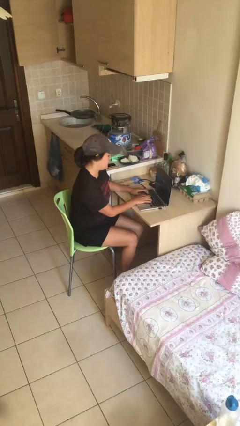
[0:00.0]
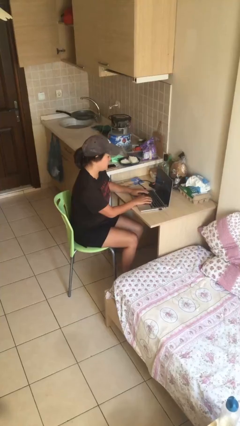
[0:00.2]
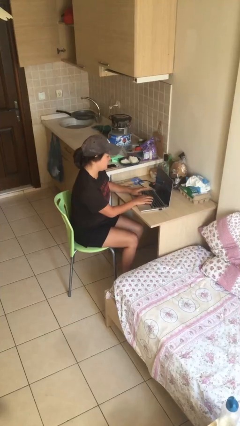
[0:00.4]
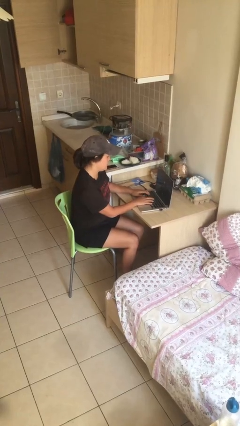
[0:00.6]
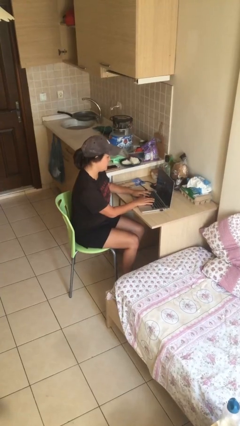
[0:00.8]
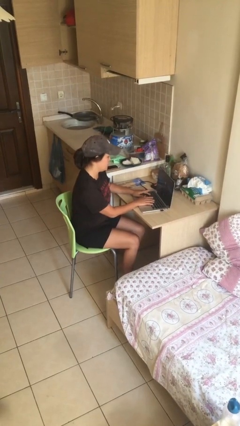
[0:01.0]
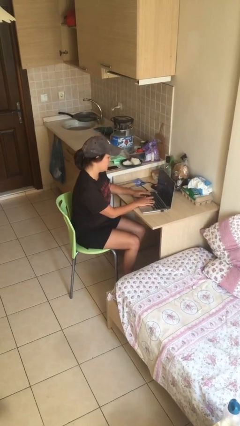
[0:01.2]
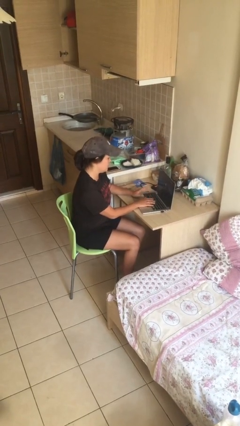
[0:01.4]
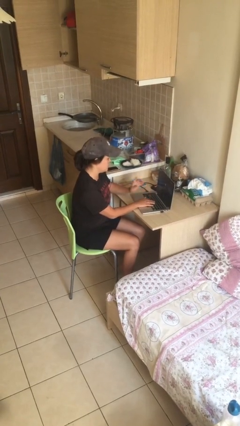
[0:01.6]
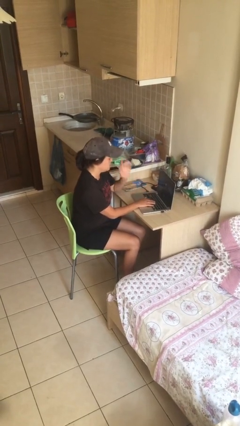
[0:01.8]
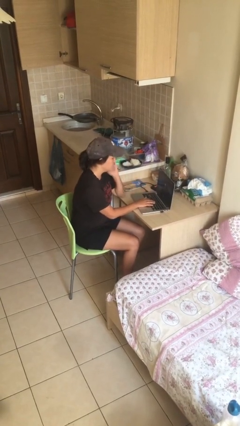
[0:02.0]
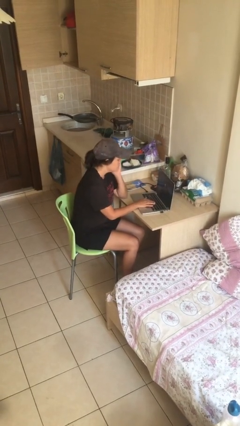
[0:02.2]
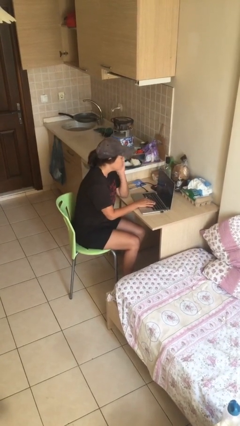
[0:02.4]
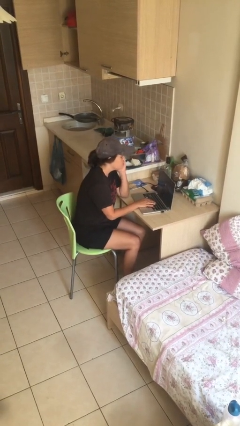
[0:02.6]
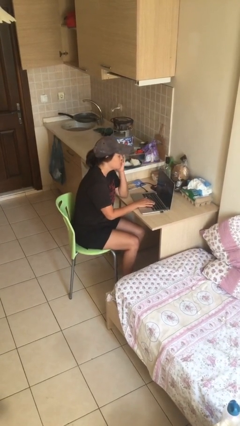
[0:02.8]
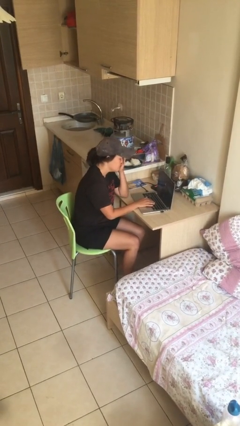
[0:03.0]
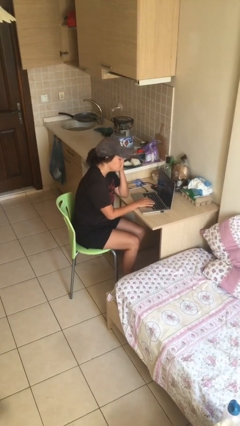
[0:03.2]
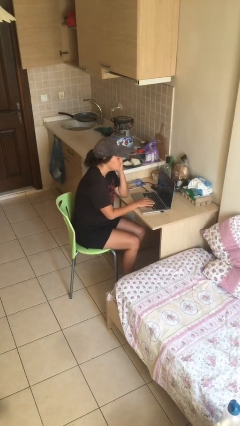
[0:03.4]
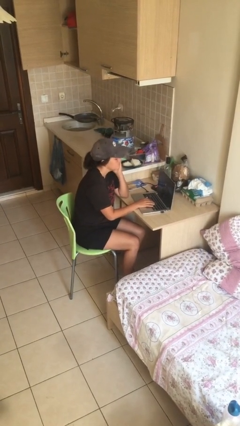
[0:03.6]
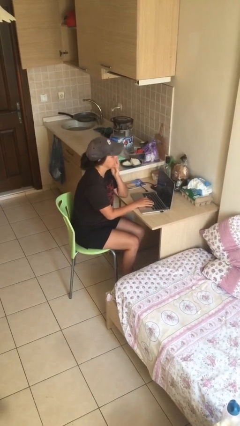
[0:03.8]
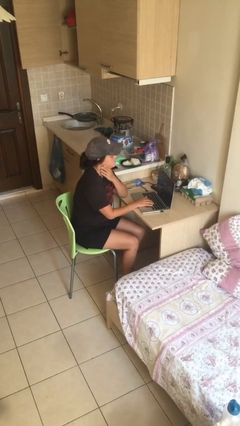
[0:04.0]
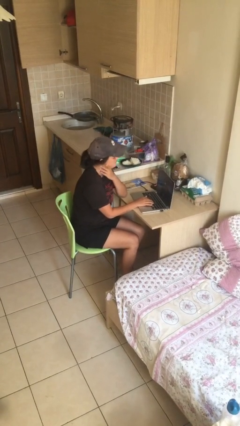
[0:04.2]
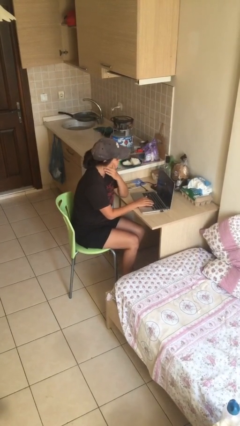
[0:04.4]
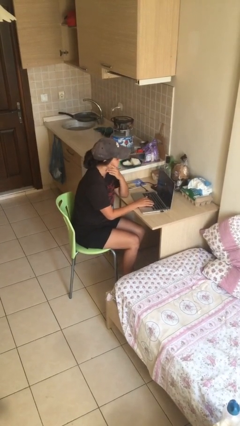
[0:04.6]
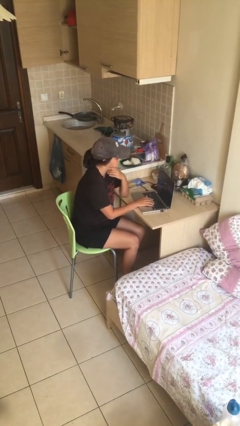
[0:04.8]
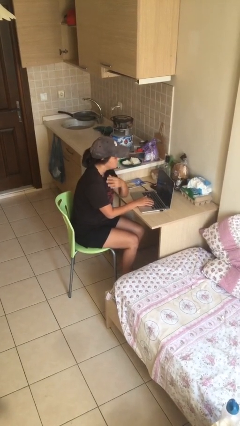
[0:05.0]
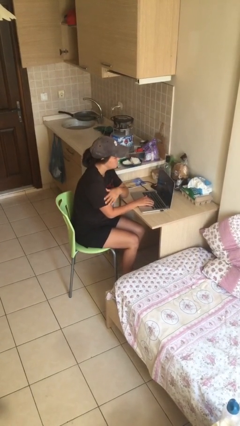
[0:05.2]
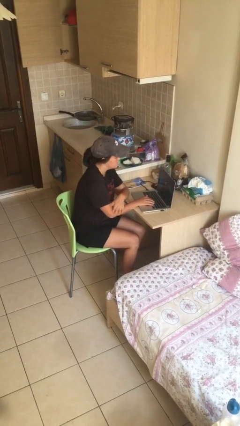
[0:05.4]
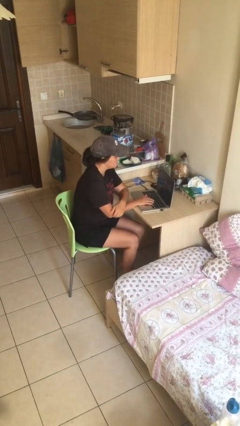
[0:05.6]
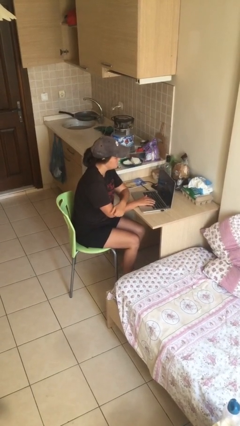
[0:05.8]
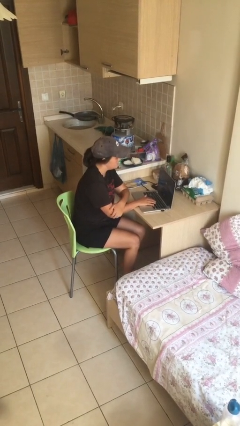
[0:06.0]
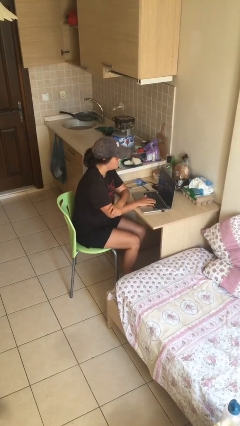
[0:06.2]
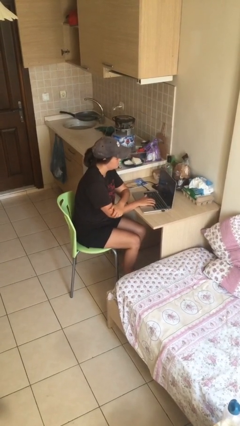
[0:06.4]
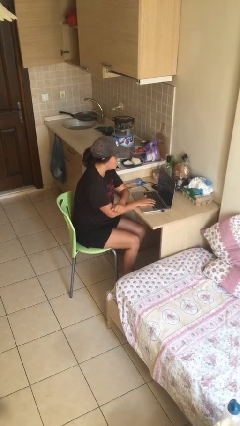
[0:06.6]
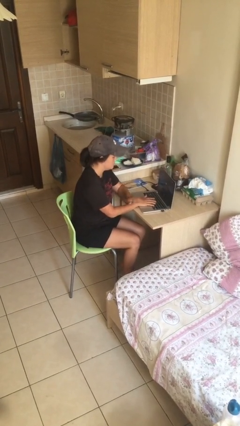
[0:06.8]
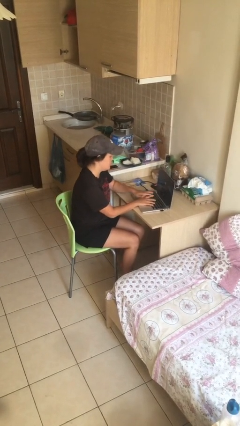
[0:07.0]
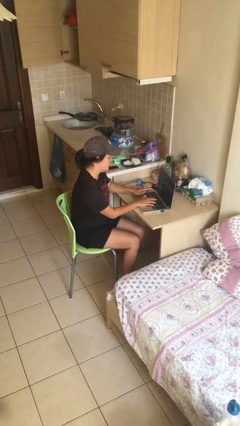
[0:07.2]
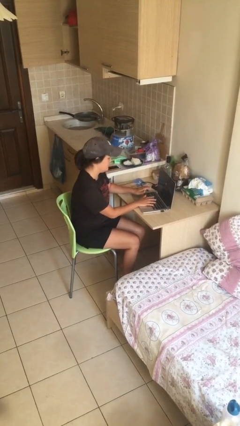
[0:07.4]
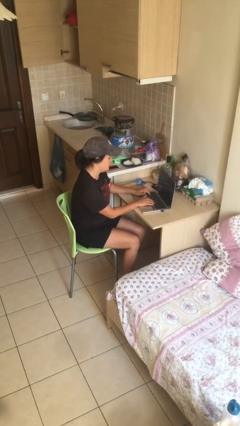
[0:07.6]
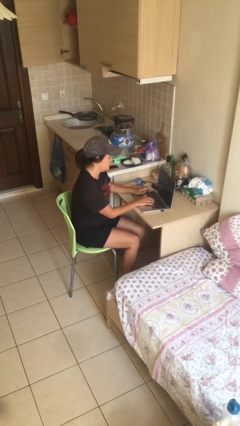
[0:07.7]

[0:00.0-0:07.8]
person interacts with laptop

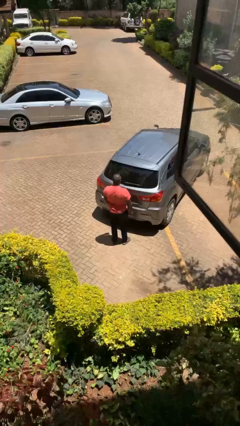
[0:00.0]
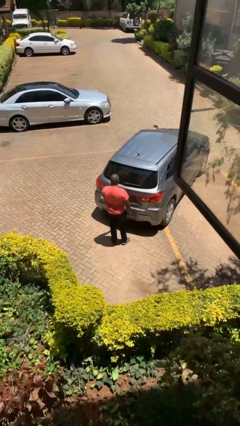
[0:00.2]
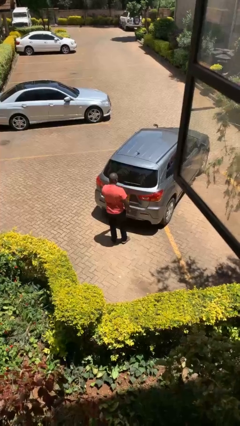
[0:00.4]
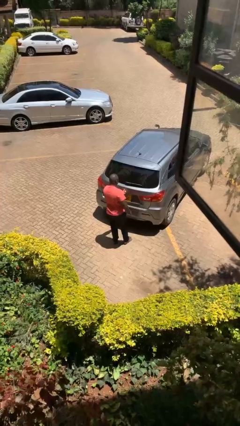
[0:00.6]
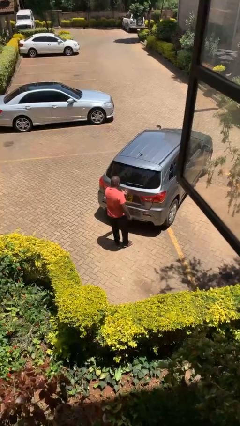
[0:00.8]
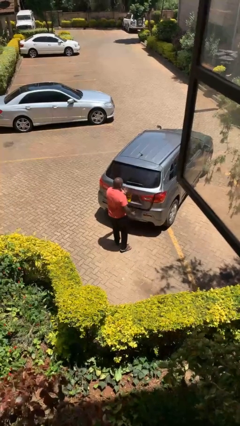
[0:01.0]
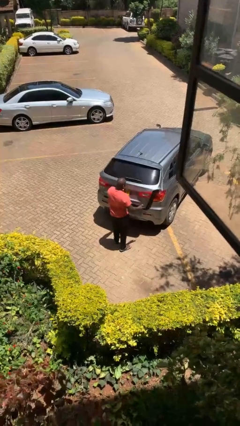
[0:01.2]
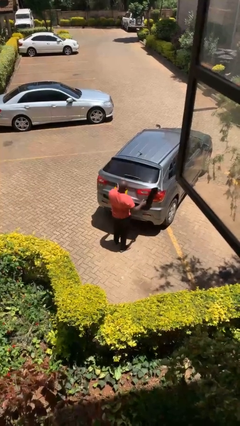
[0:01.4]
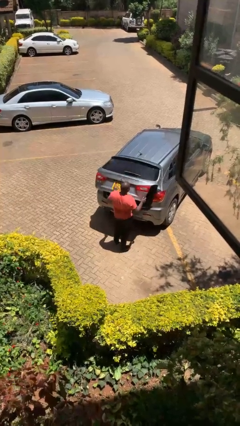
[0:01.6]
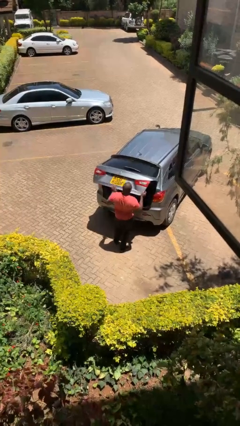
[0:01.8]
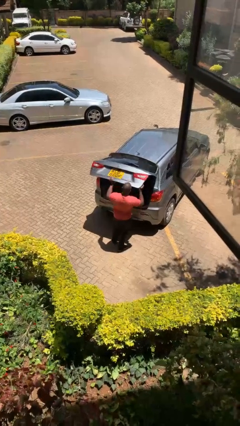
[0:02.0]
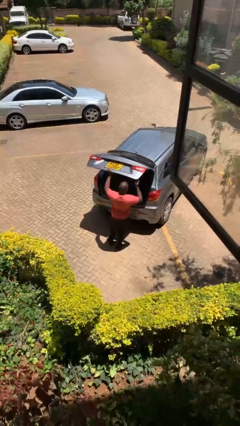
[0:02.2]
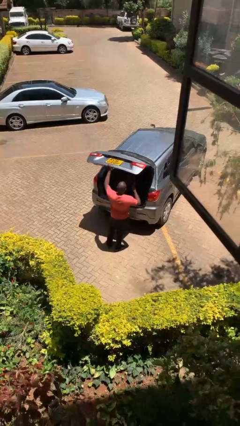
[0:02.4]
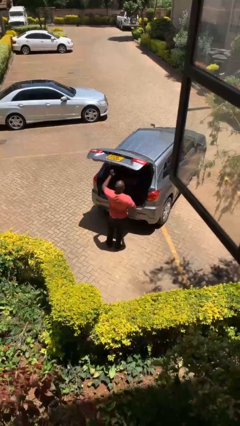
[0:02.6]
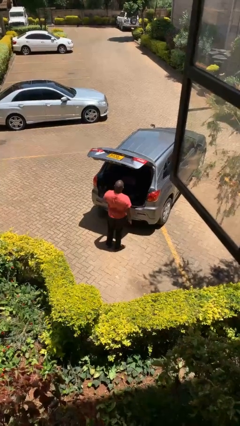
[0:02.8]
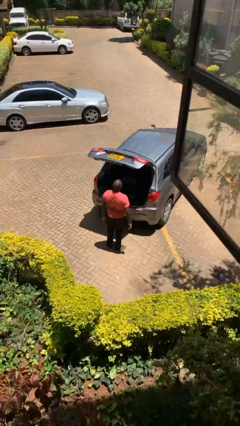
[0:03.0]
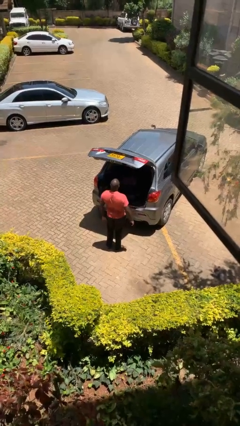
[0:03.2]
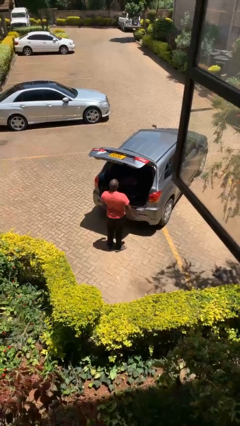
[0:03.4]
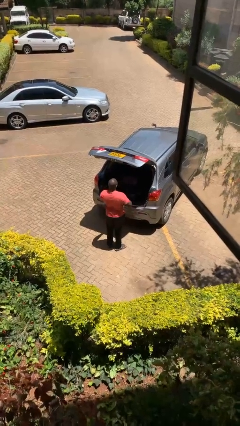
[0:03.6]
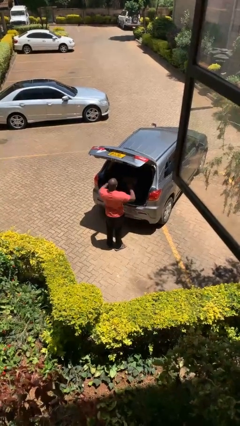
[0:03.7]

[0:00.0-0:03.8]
person opens car trunk

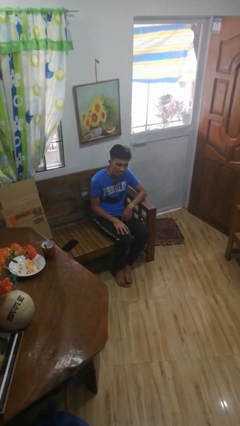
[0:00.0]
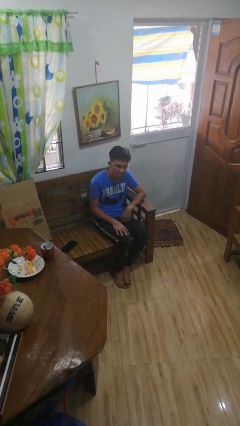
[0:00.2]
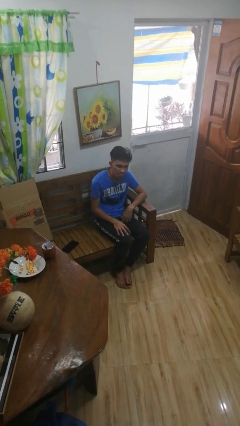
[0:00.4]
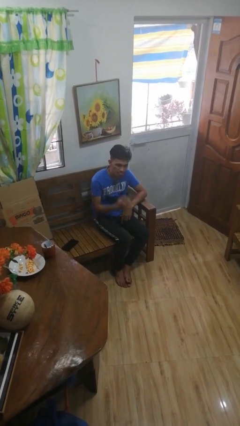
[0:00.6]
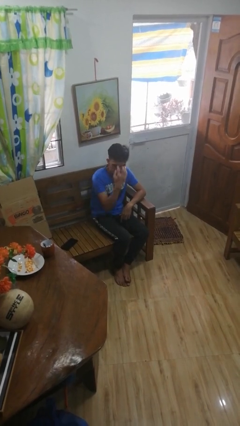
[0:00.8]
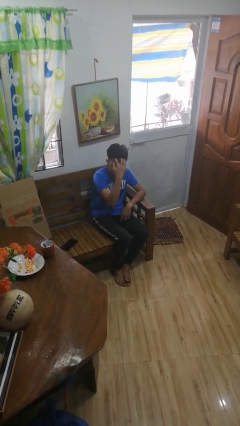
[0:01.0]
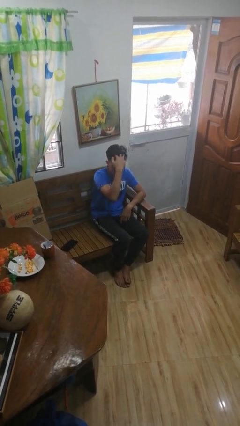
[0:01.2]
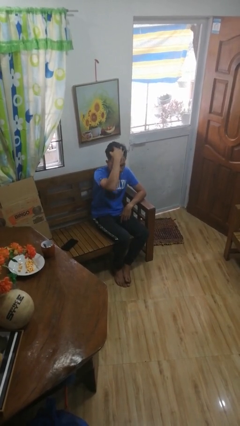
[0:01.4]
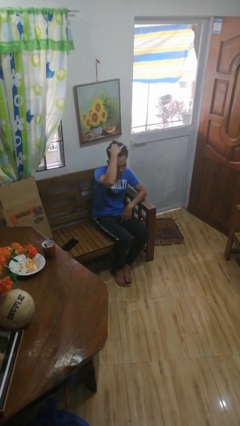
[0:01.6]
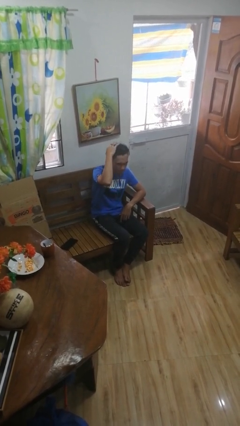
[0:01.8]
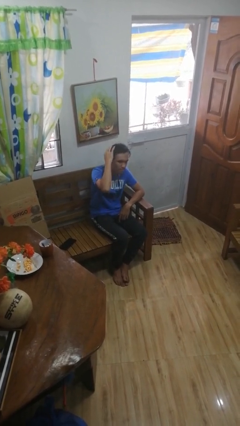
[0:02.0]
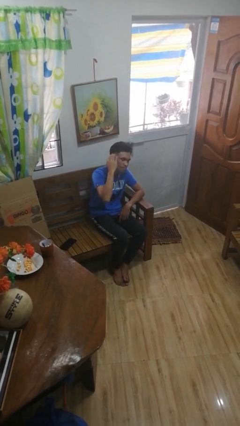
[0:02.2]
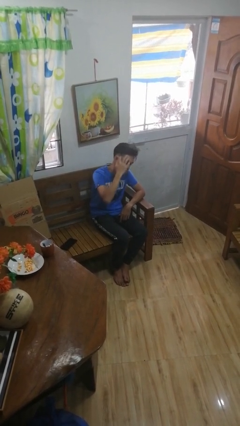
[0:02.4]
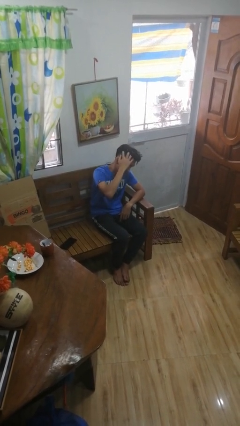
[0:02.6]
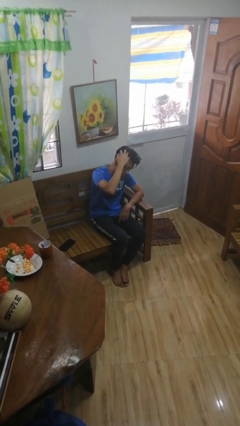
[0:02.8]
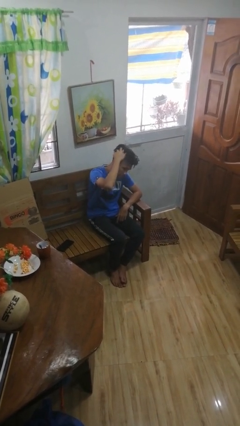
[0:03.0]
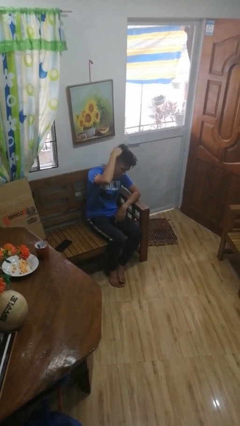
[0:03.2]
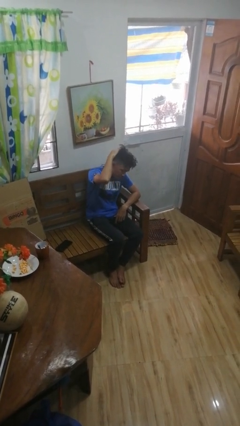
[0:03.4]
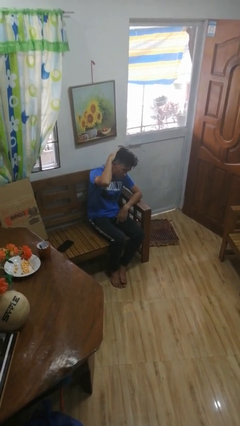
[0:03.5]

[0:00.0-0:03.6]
person strokes hair

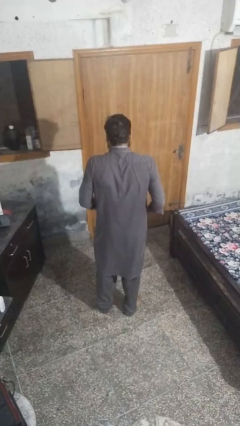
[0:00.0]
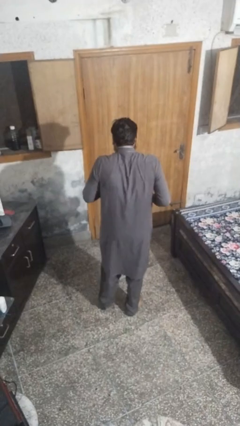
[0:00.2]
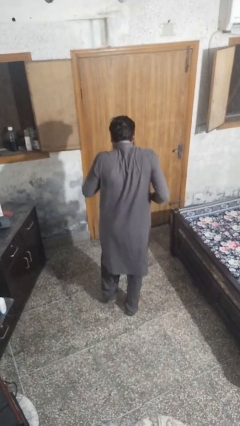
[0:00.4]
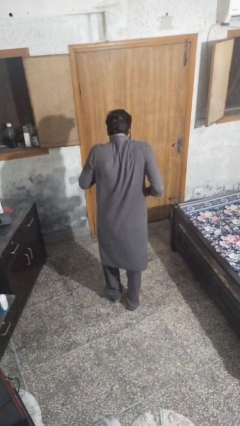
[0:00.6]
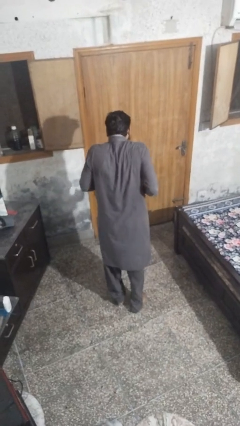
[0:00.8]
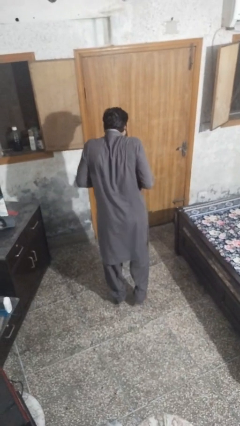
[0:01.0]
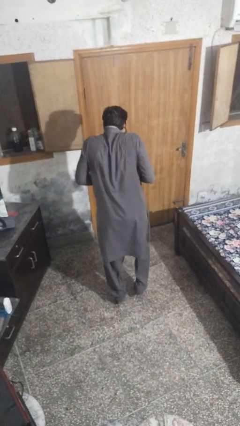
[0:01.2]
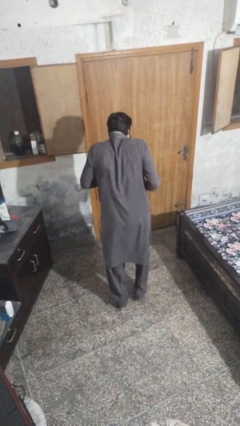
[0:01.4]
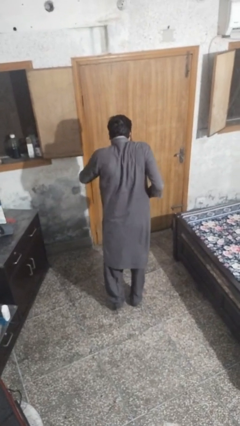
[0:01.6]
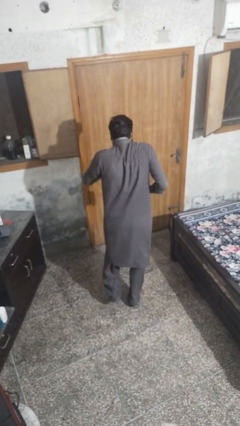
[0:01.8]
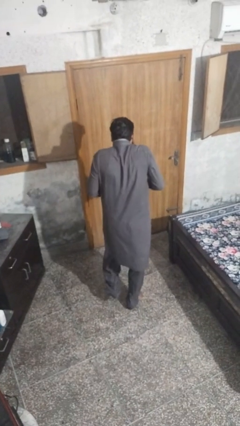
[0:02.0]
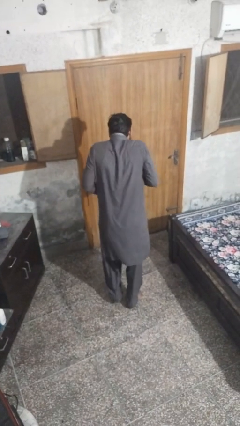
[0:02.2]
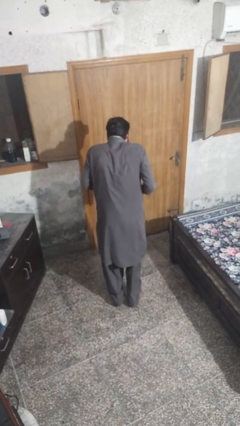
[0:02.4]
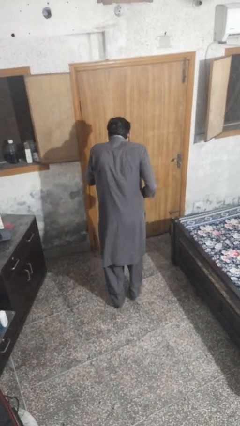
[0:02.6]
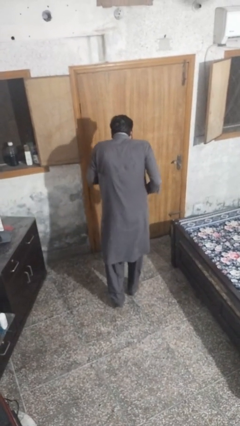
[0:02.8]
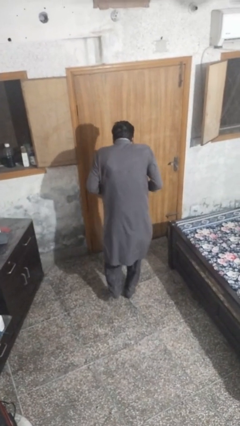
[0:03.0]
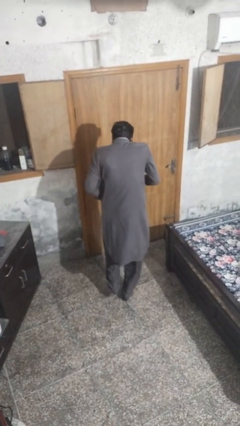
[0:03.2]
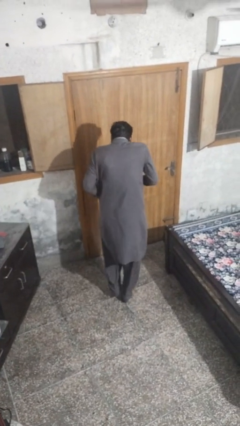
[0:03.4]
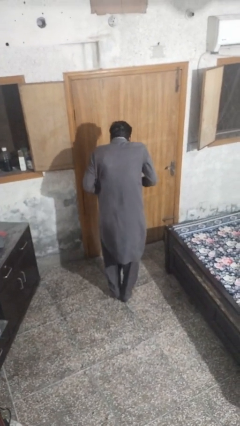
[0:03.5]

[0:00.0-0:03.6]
person walks tiptoe
